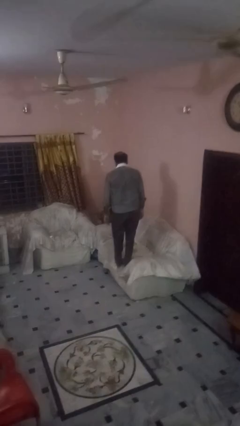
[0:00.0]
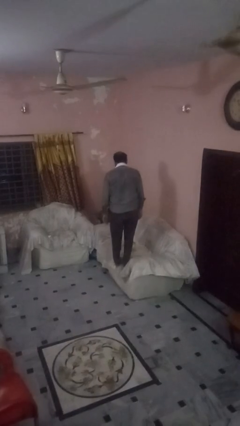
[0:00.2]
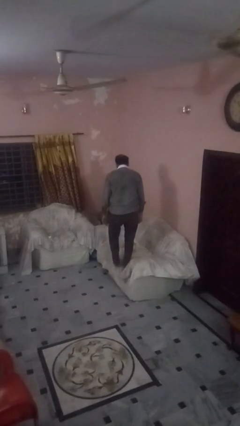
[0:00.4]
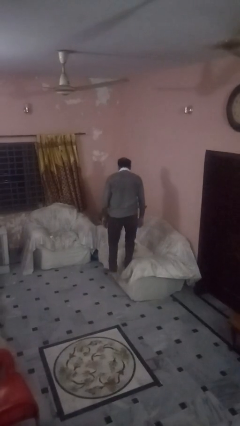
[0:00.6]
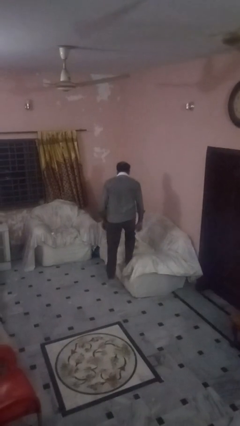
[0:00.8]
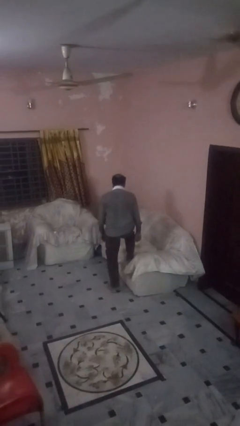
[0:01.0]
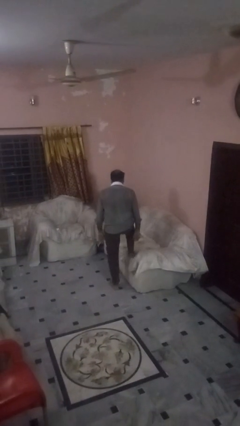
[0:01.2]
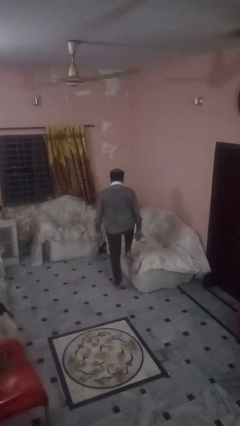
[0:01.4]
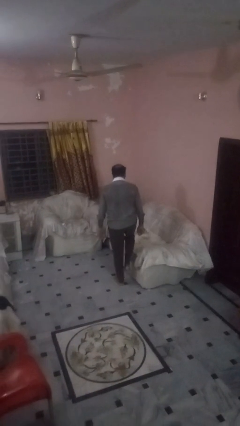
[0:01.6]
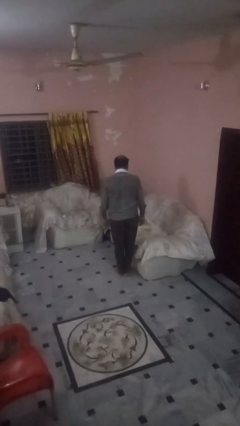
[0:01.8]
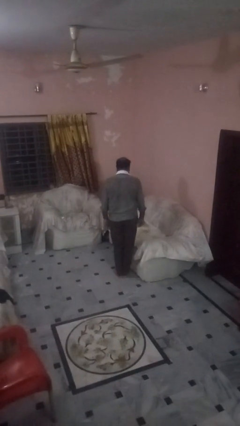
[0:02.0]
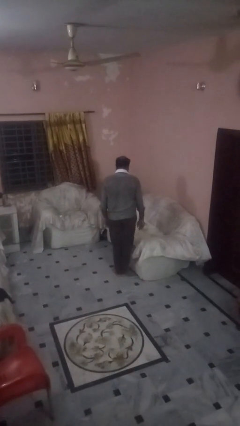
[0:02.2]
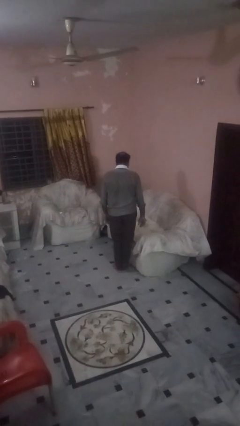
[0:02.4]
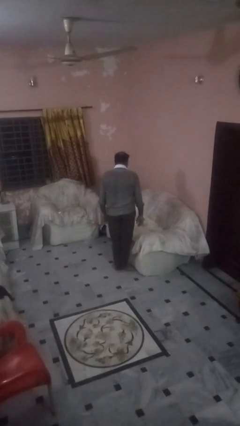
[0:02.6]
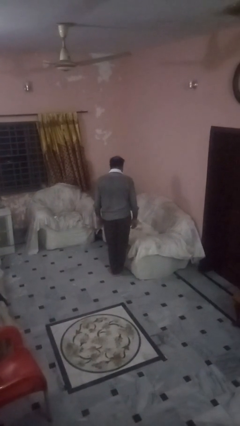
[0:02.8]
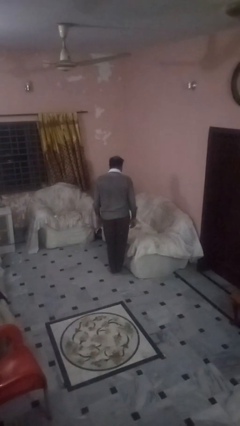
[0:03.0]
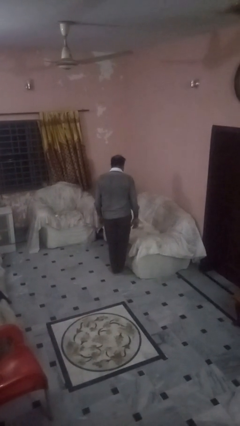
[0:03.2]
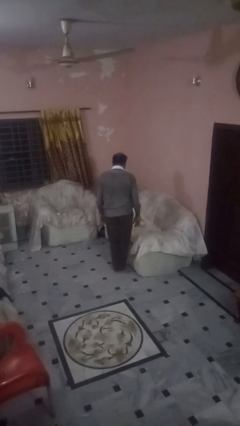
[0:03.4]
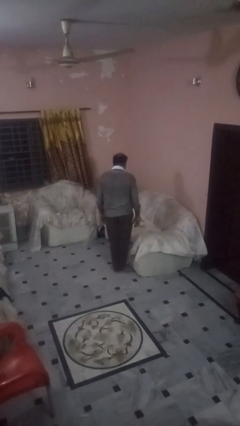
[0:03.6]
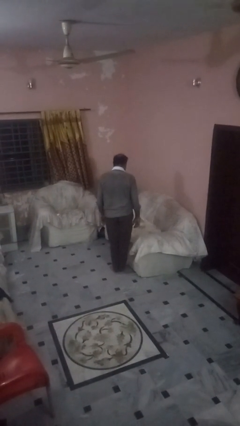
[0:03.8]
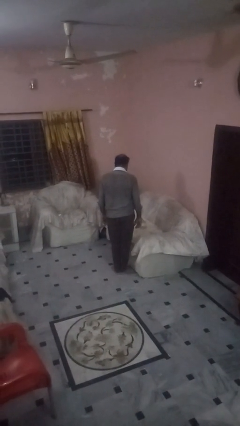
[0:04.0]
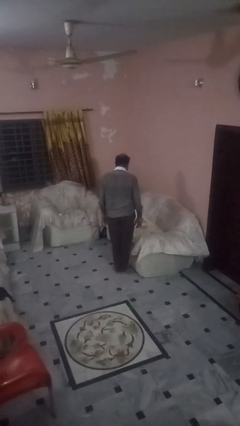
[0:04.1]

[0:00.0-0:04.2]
person climbs off couch

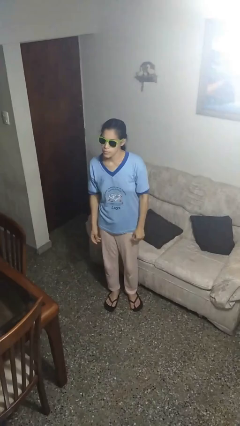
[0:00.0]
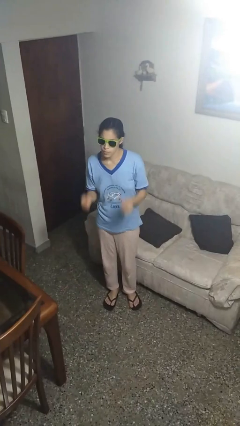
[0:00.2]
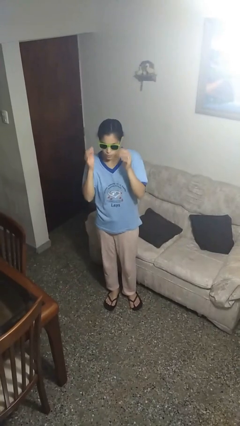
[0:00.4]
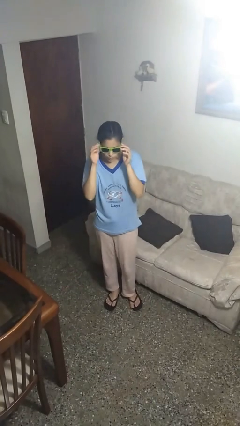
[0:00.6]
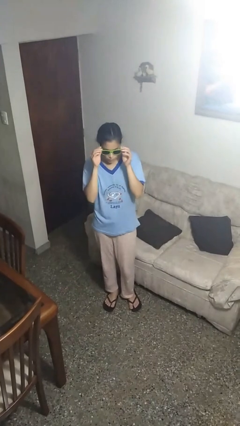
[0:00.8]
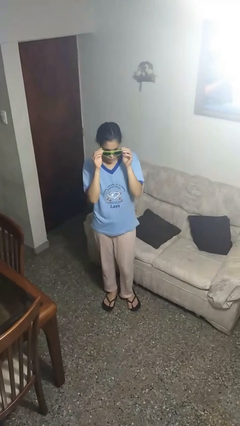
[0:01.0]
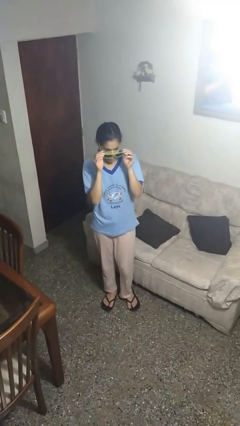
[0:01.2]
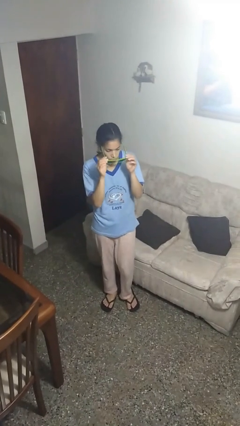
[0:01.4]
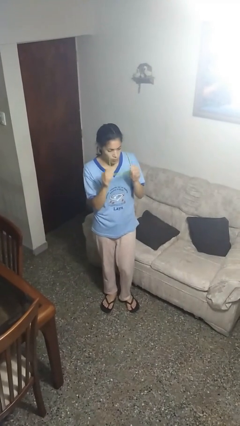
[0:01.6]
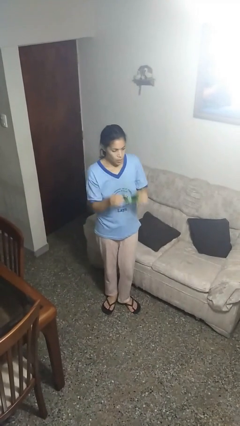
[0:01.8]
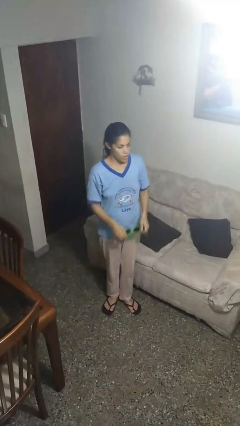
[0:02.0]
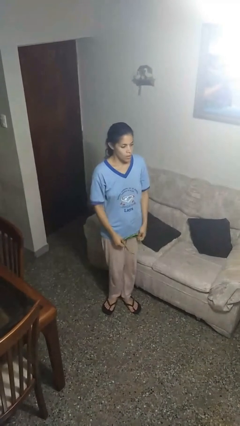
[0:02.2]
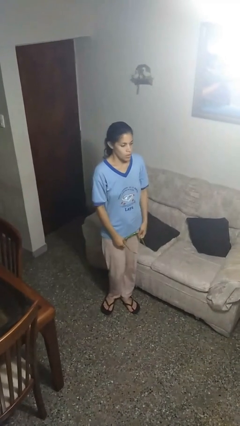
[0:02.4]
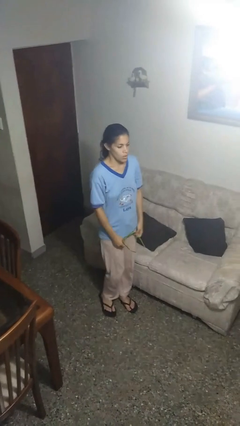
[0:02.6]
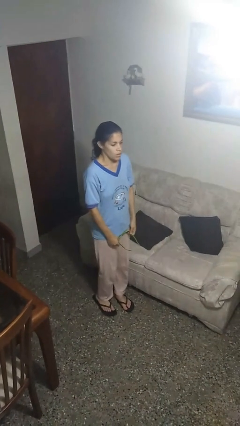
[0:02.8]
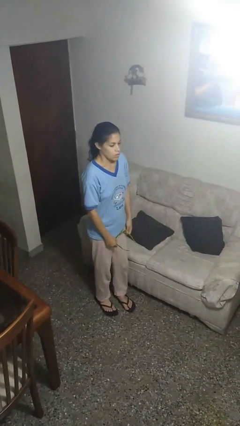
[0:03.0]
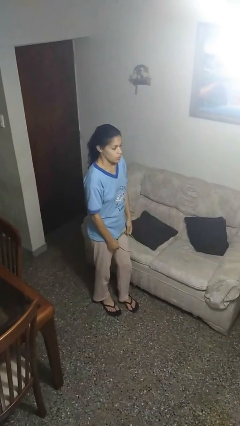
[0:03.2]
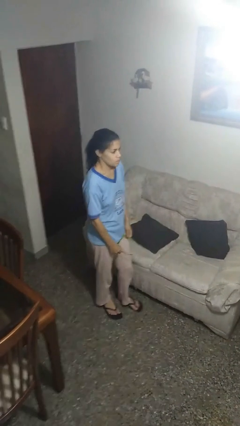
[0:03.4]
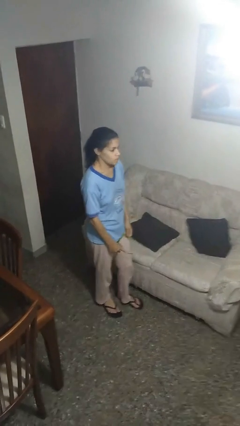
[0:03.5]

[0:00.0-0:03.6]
person takes off sunglasses

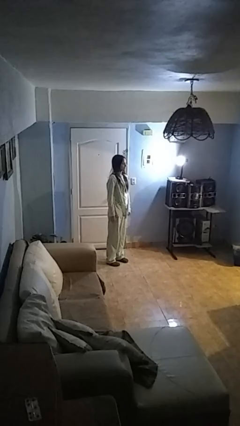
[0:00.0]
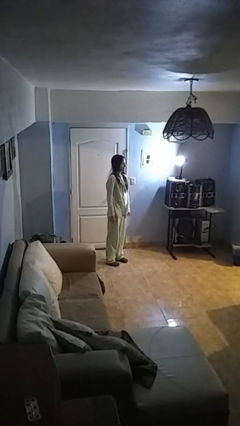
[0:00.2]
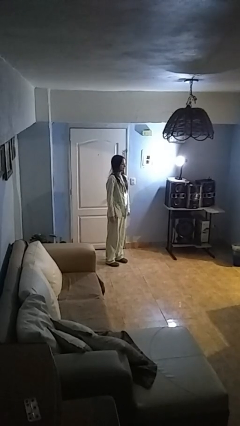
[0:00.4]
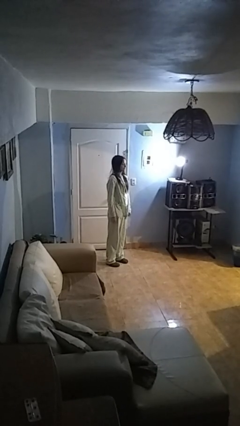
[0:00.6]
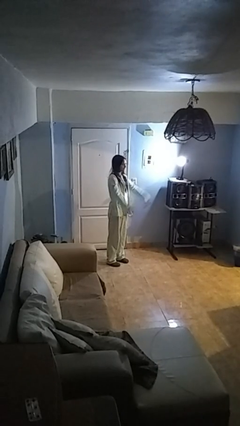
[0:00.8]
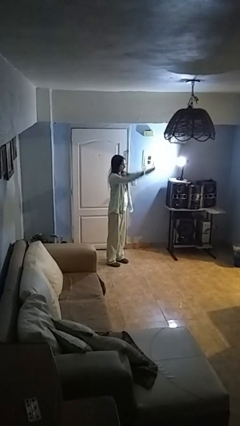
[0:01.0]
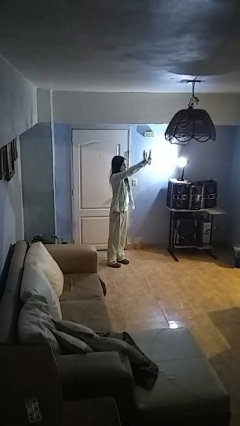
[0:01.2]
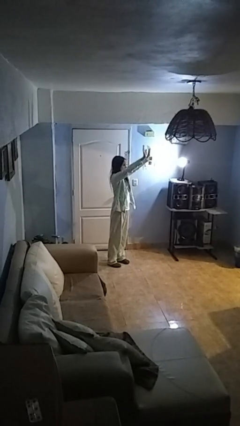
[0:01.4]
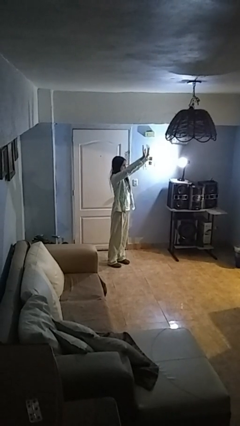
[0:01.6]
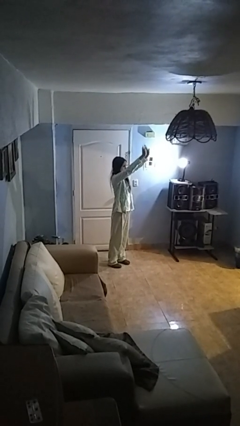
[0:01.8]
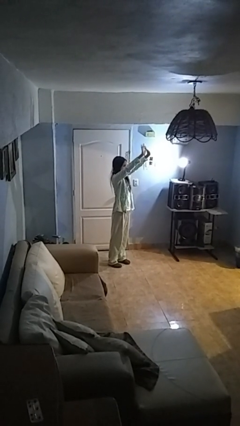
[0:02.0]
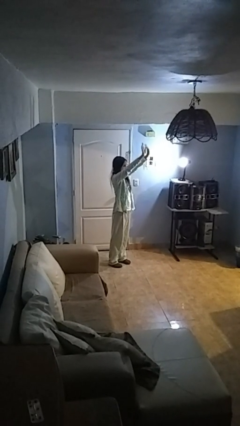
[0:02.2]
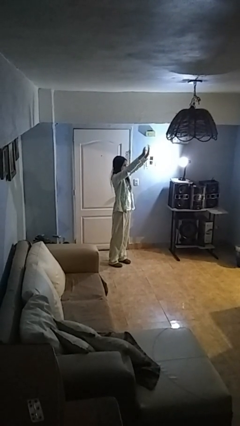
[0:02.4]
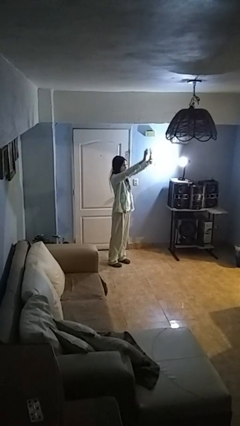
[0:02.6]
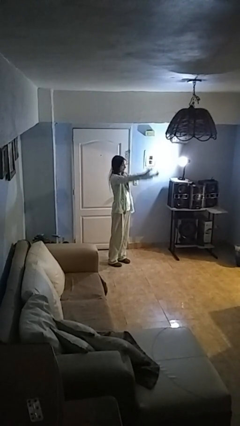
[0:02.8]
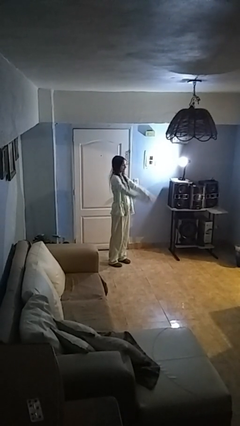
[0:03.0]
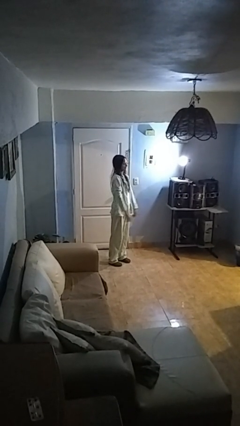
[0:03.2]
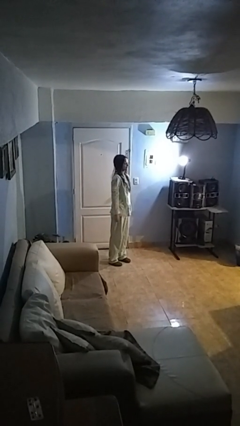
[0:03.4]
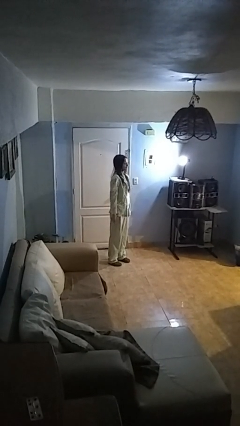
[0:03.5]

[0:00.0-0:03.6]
person waves at person

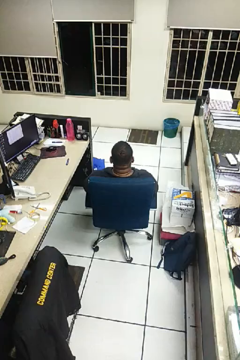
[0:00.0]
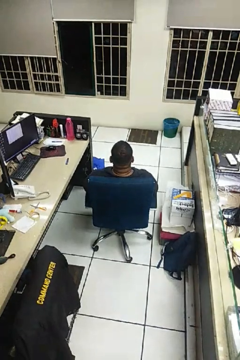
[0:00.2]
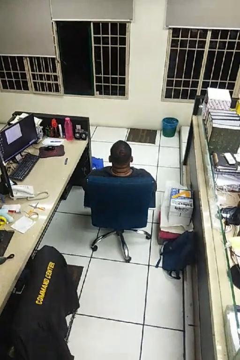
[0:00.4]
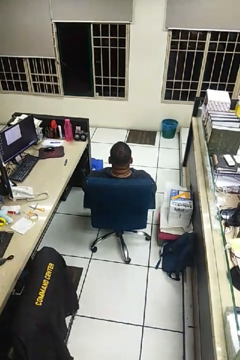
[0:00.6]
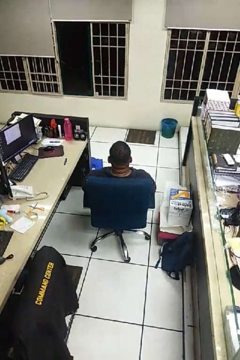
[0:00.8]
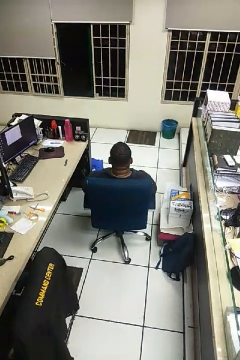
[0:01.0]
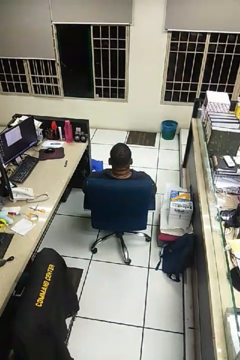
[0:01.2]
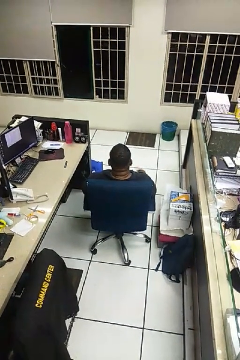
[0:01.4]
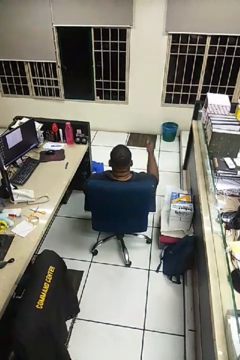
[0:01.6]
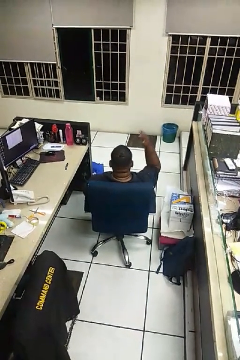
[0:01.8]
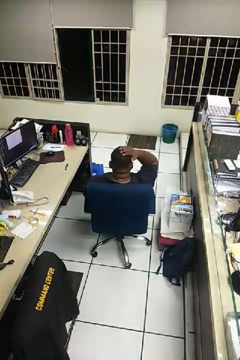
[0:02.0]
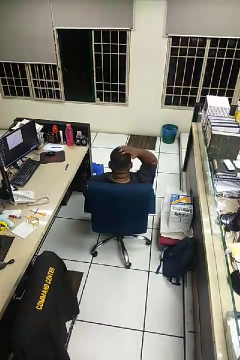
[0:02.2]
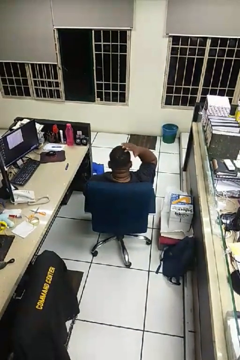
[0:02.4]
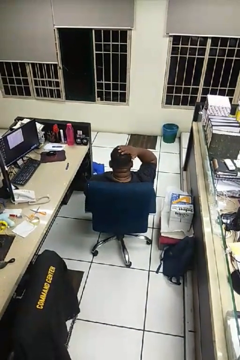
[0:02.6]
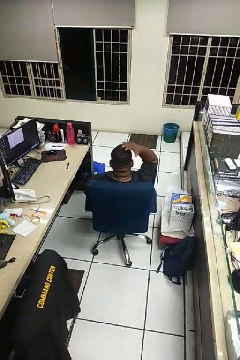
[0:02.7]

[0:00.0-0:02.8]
person pats head

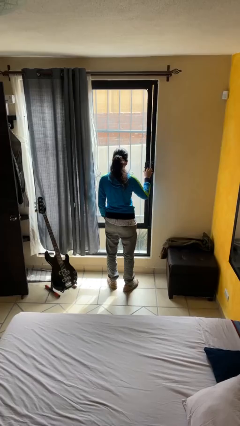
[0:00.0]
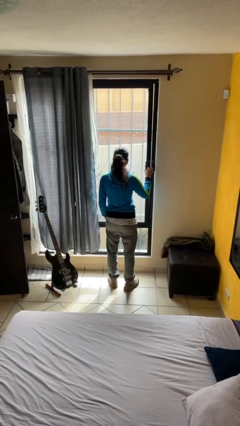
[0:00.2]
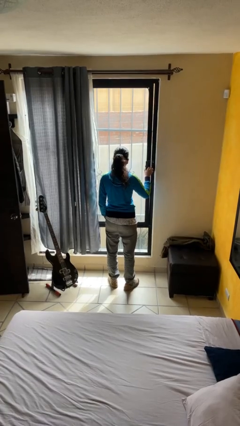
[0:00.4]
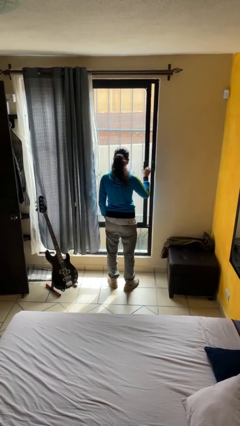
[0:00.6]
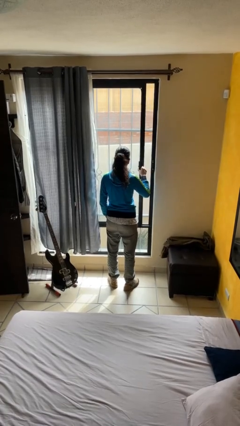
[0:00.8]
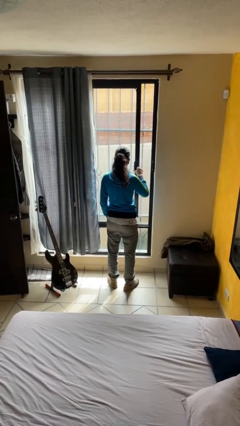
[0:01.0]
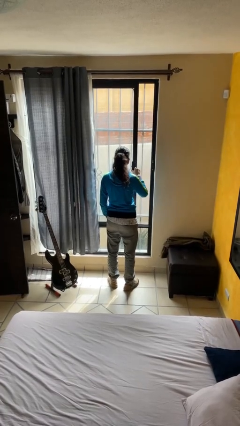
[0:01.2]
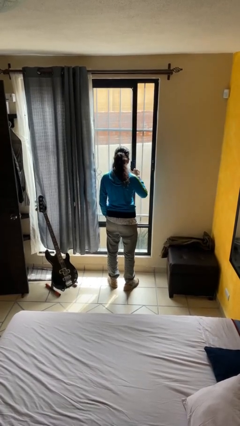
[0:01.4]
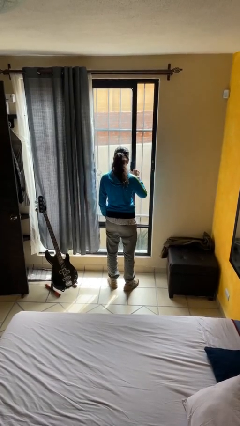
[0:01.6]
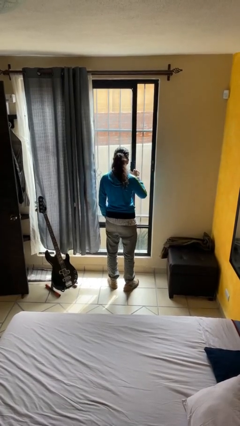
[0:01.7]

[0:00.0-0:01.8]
person opens home window

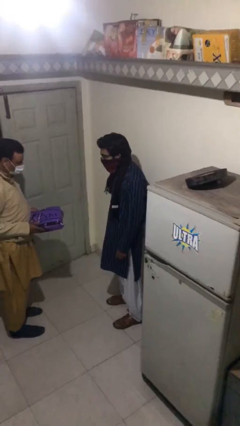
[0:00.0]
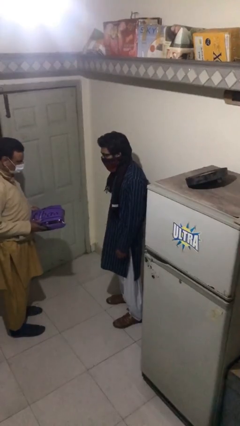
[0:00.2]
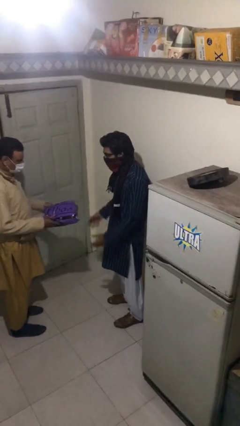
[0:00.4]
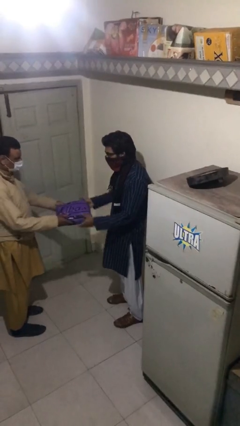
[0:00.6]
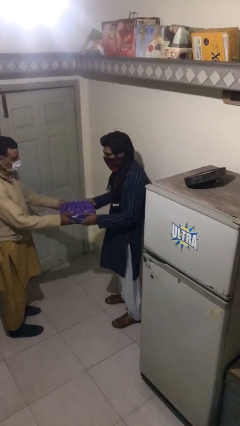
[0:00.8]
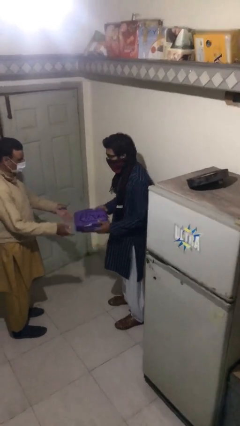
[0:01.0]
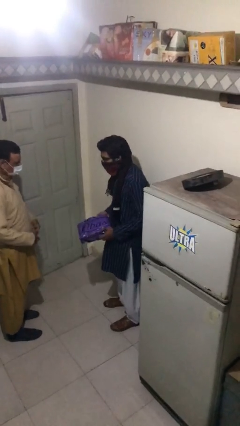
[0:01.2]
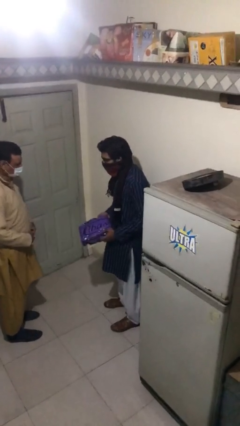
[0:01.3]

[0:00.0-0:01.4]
person transfers object to person

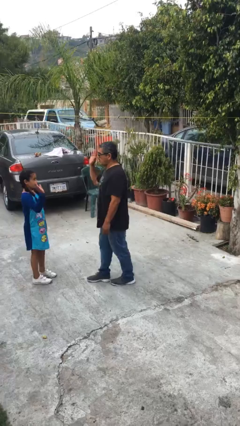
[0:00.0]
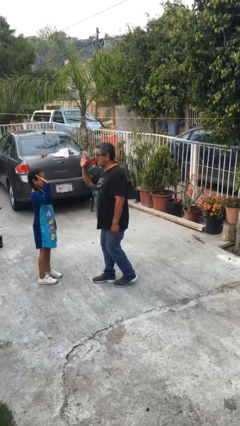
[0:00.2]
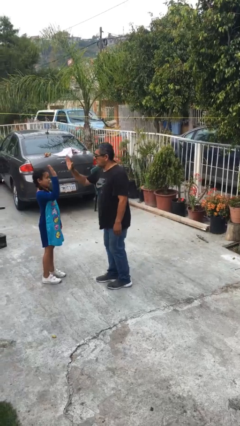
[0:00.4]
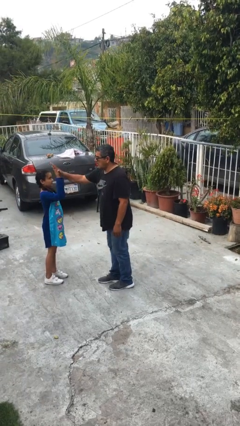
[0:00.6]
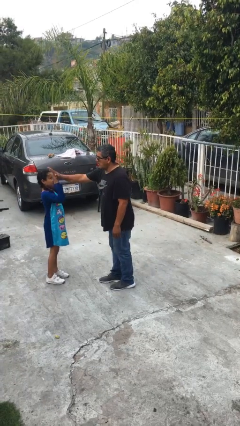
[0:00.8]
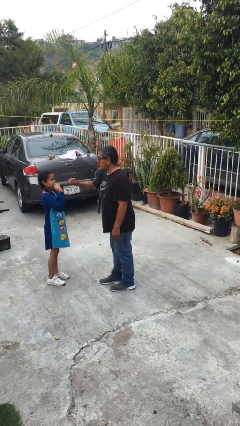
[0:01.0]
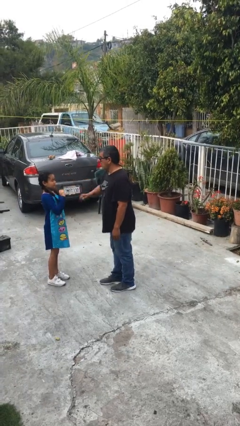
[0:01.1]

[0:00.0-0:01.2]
person highfives hand
